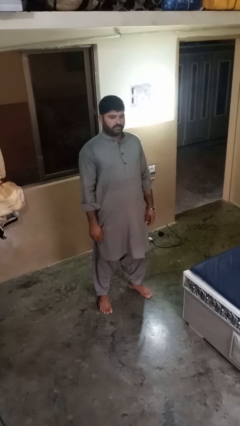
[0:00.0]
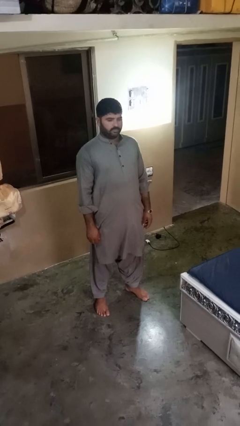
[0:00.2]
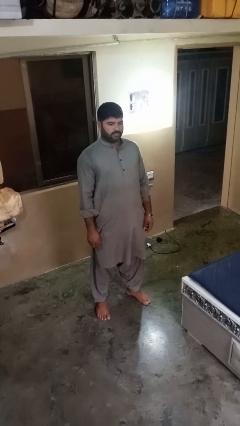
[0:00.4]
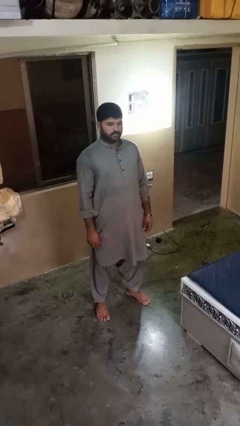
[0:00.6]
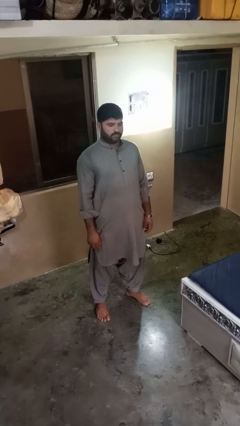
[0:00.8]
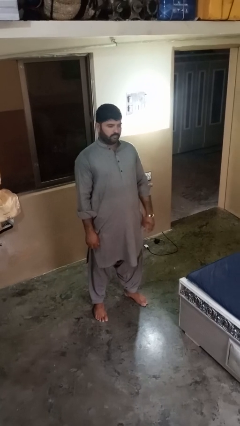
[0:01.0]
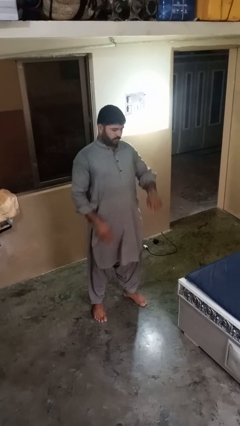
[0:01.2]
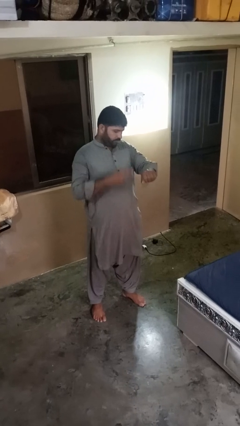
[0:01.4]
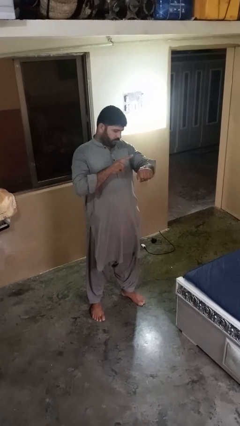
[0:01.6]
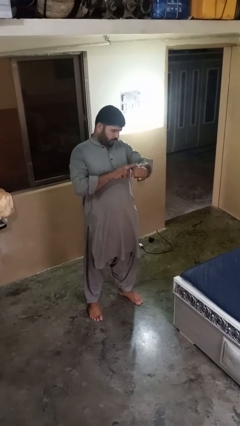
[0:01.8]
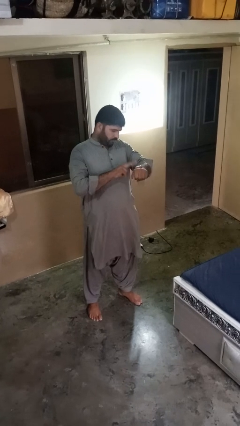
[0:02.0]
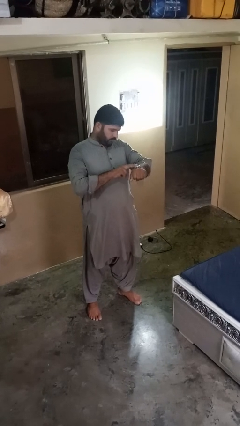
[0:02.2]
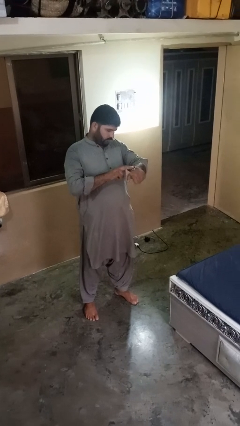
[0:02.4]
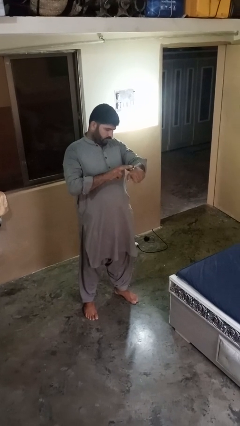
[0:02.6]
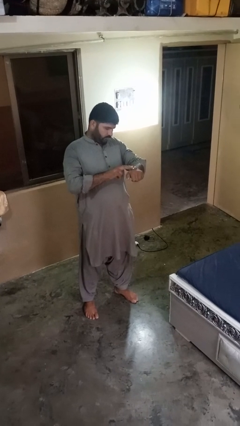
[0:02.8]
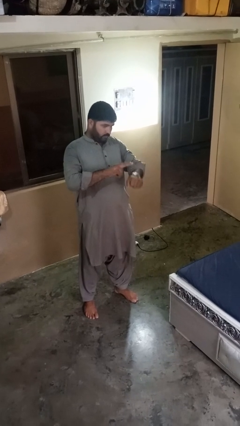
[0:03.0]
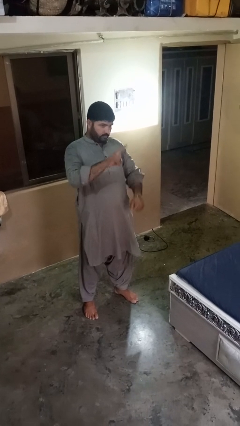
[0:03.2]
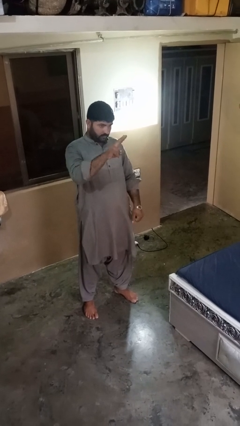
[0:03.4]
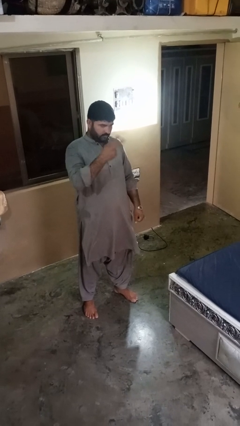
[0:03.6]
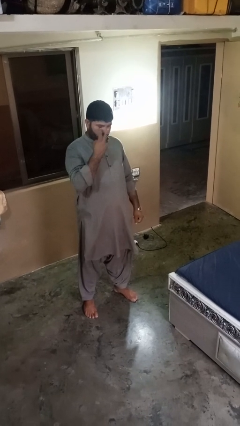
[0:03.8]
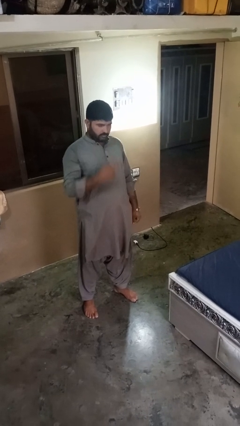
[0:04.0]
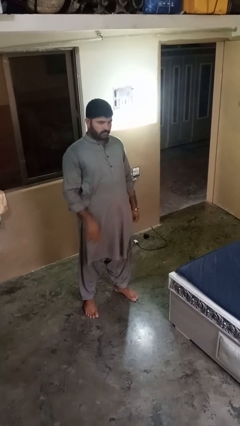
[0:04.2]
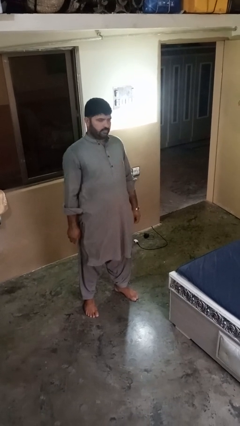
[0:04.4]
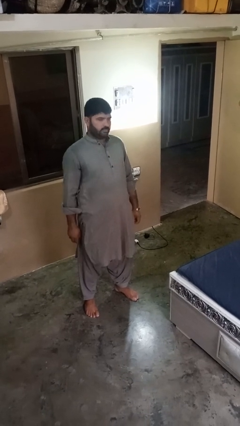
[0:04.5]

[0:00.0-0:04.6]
person gestures watch closely

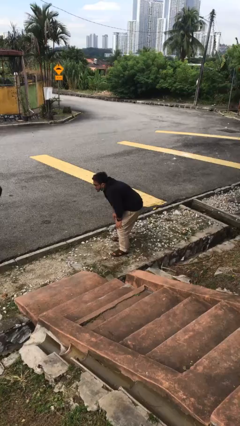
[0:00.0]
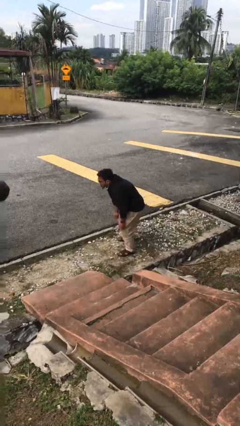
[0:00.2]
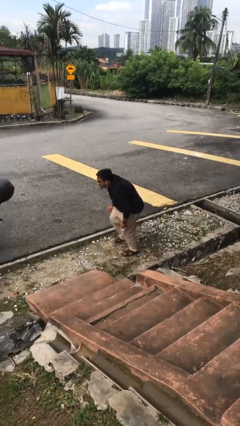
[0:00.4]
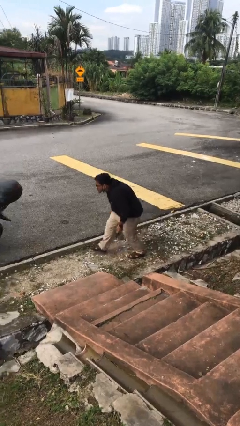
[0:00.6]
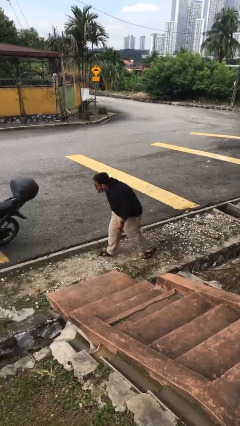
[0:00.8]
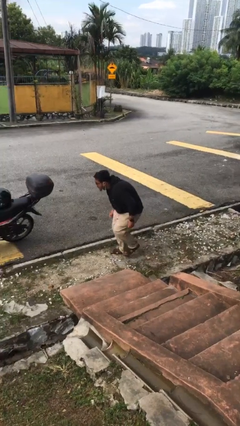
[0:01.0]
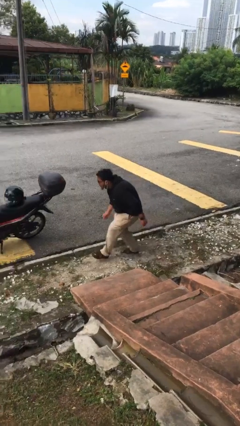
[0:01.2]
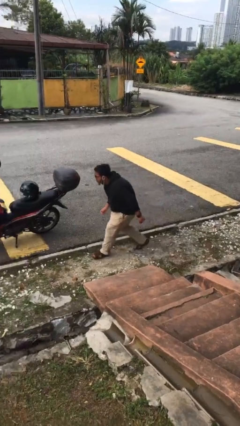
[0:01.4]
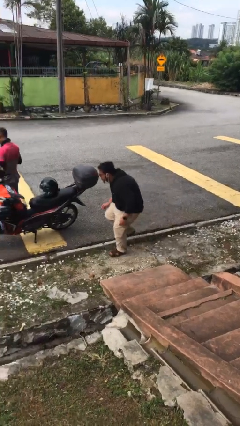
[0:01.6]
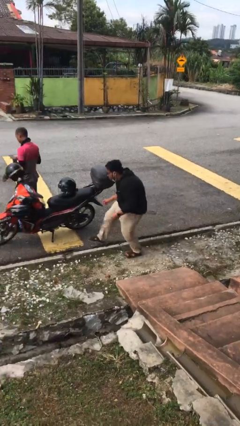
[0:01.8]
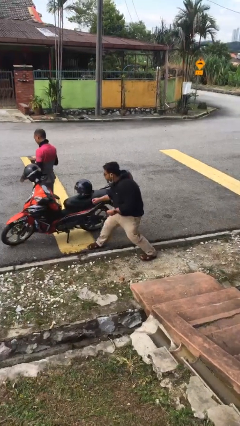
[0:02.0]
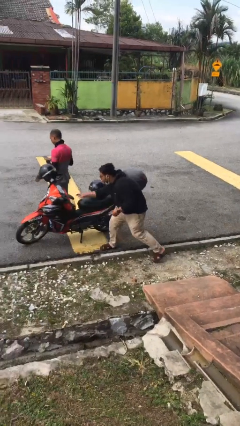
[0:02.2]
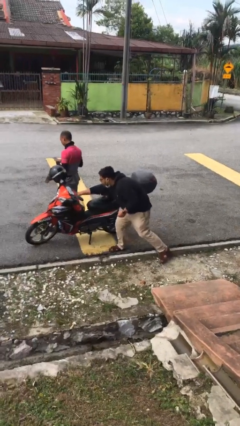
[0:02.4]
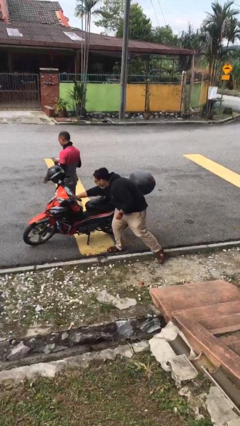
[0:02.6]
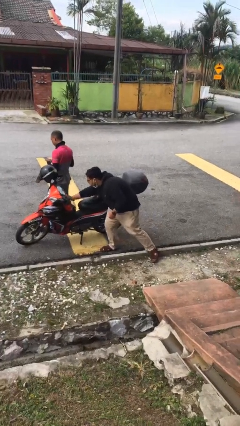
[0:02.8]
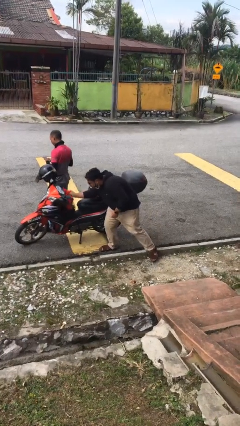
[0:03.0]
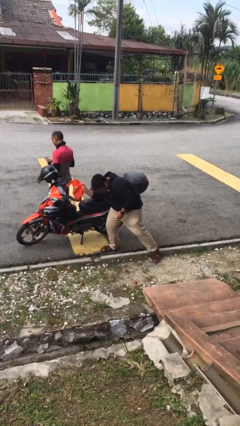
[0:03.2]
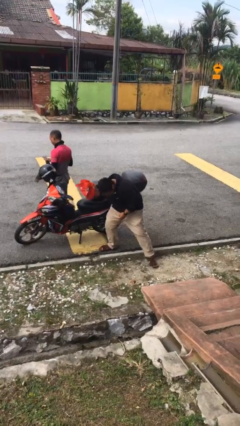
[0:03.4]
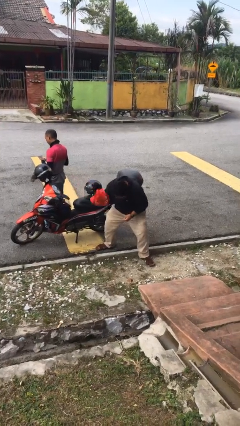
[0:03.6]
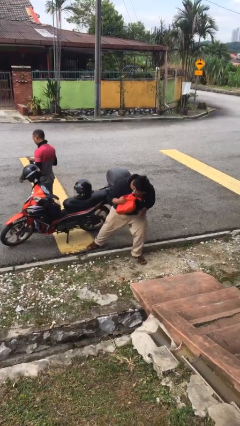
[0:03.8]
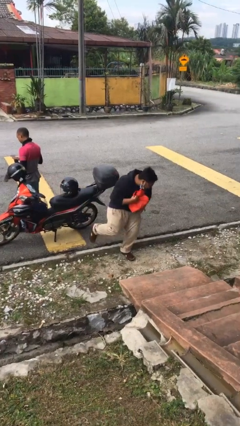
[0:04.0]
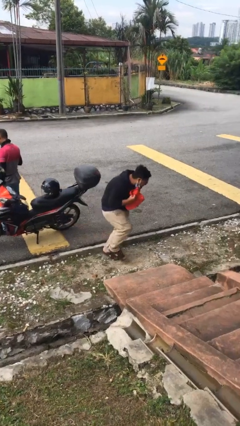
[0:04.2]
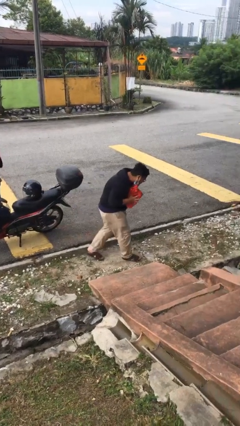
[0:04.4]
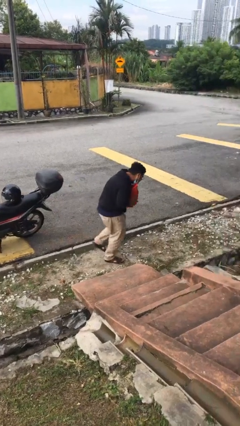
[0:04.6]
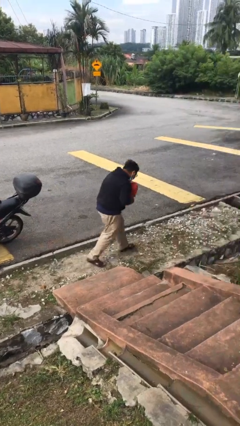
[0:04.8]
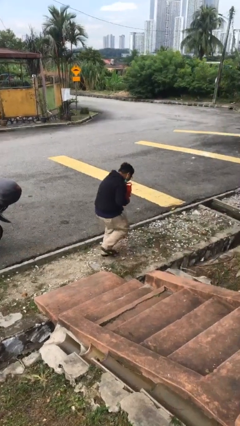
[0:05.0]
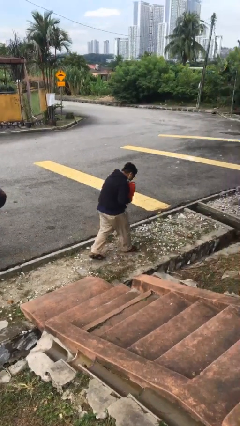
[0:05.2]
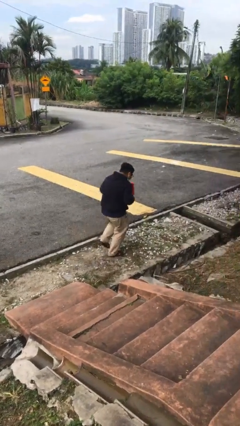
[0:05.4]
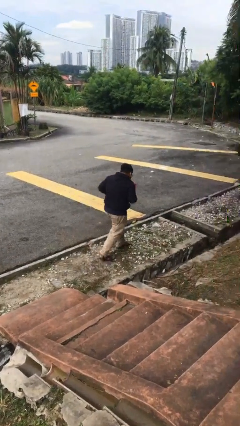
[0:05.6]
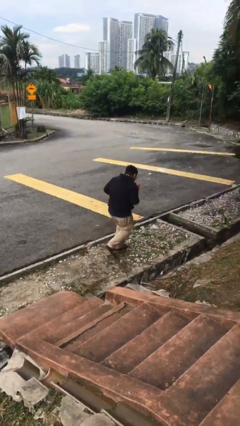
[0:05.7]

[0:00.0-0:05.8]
person steals object from person

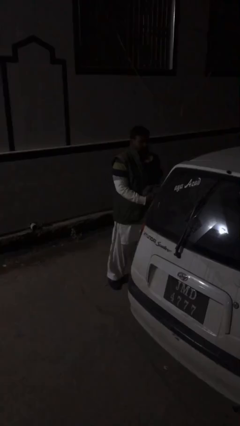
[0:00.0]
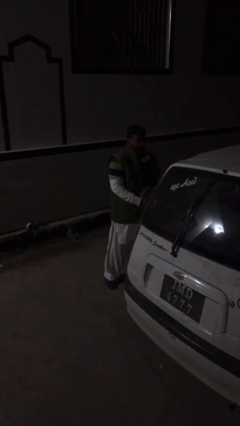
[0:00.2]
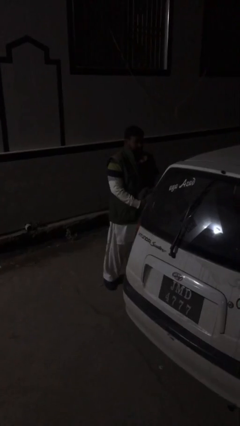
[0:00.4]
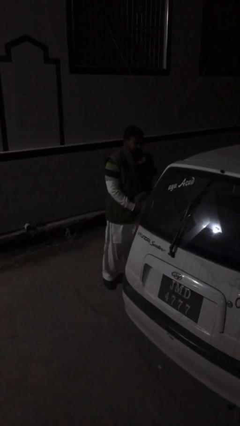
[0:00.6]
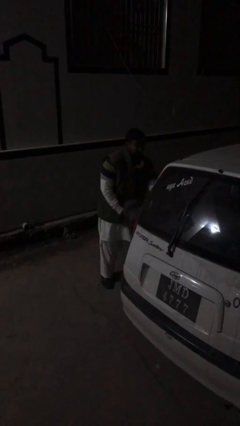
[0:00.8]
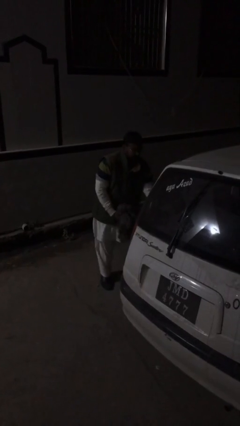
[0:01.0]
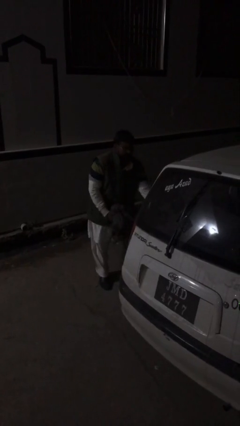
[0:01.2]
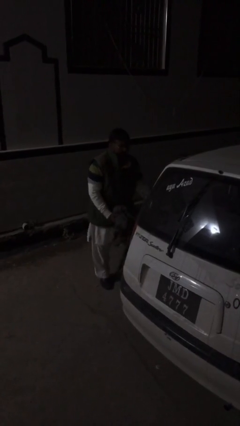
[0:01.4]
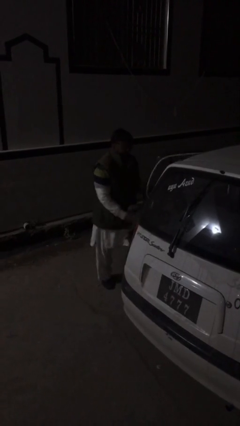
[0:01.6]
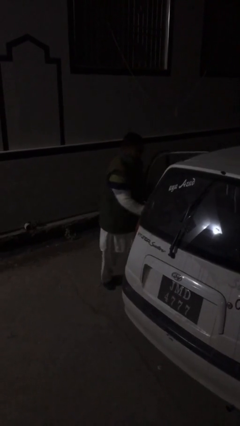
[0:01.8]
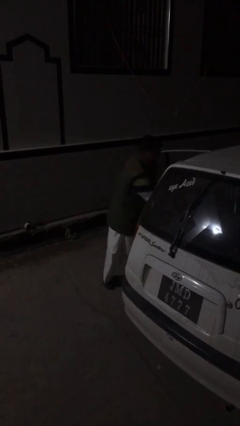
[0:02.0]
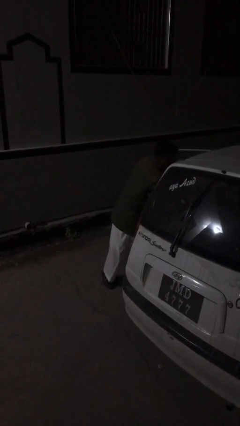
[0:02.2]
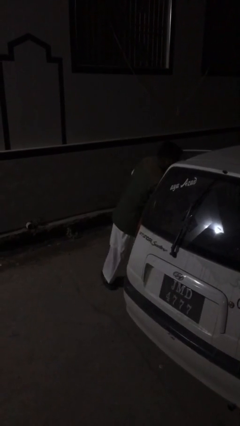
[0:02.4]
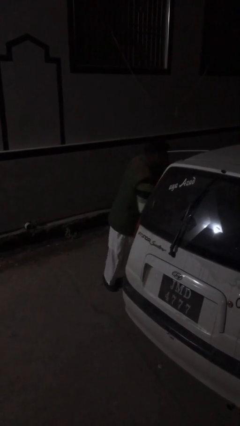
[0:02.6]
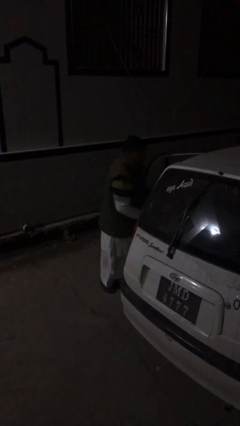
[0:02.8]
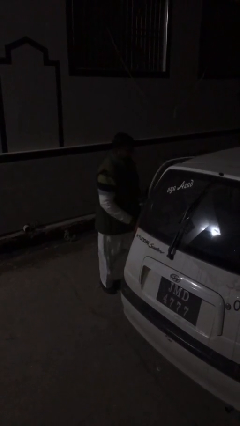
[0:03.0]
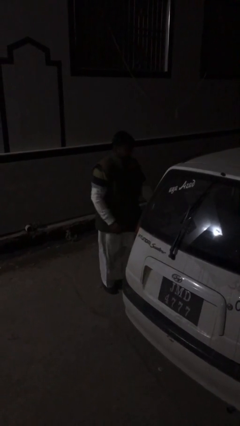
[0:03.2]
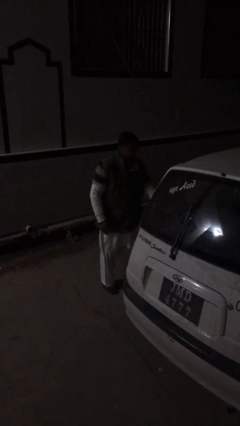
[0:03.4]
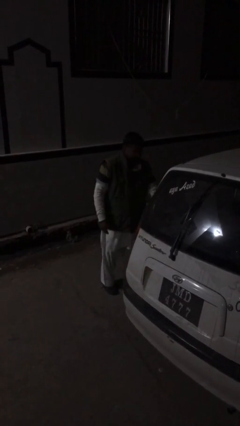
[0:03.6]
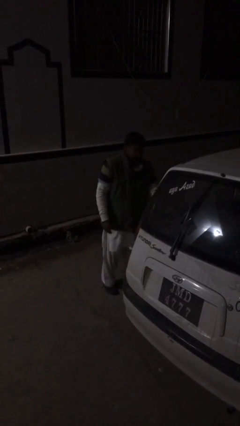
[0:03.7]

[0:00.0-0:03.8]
person loads car

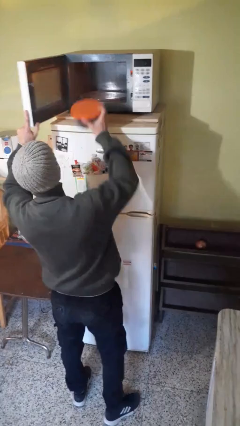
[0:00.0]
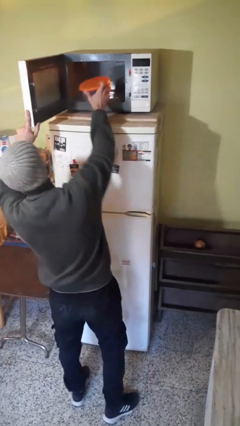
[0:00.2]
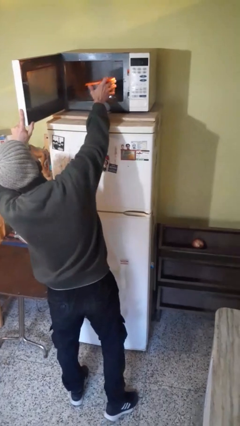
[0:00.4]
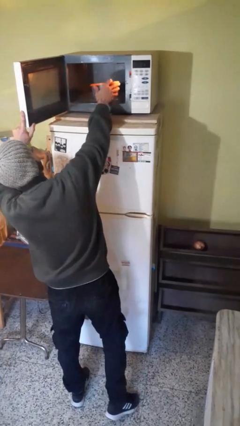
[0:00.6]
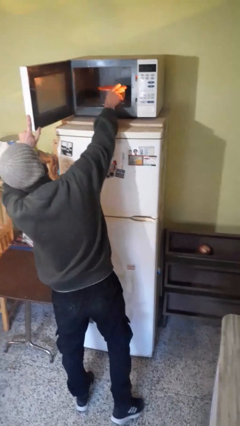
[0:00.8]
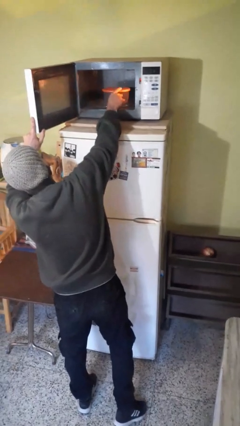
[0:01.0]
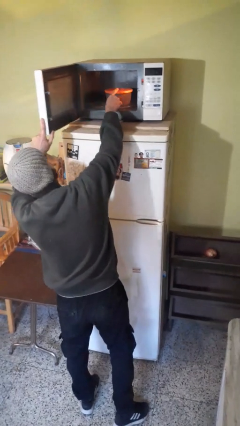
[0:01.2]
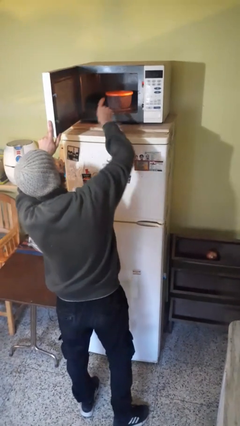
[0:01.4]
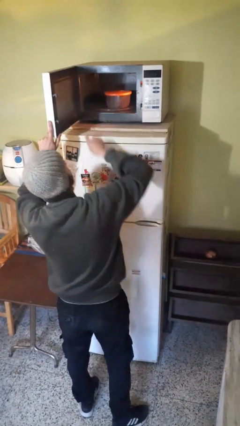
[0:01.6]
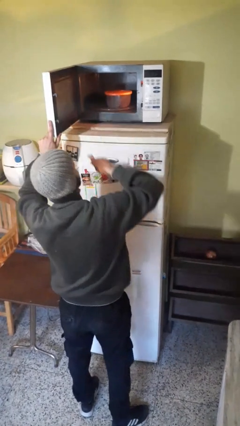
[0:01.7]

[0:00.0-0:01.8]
person puts object into microwave

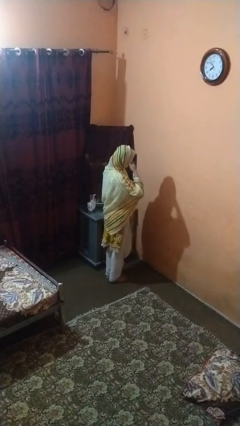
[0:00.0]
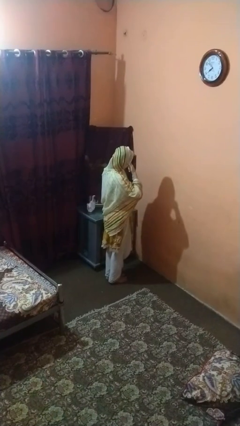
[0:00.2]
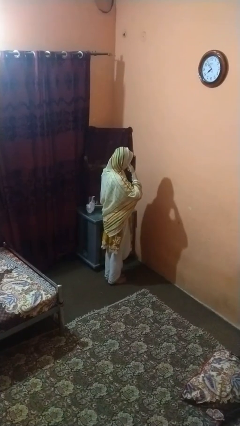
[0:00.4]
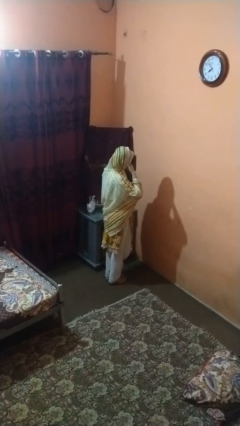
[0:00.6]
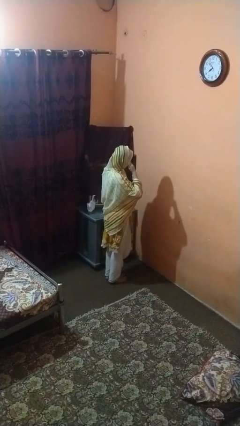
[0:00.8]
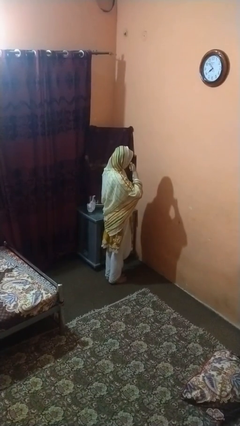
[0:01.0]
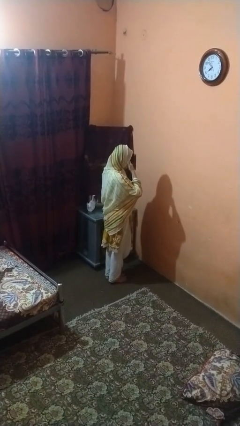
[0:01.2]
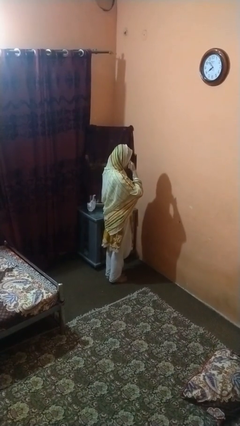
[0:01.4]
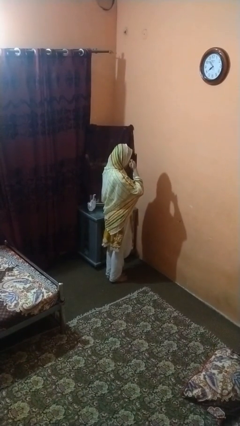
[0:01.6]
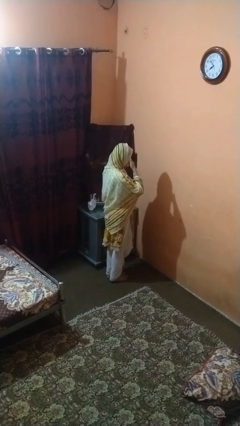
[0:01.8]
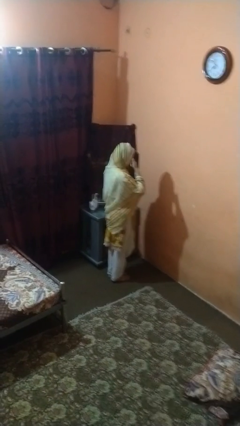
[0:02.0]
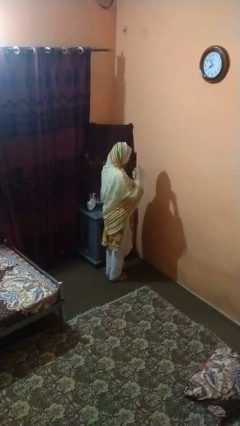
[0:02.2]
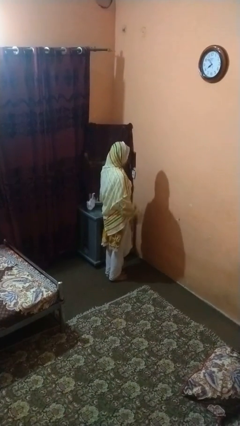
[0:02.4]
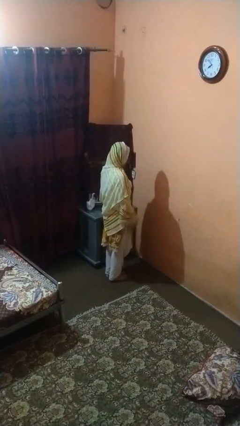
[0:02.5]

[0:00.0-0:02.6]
person rubs eyes
